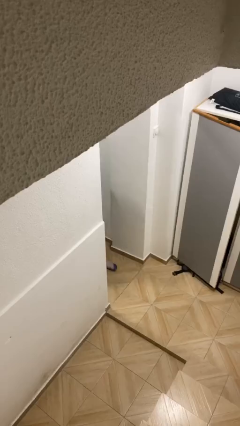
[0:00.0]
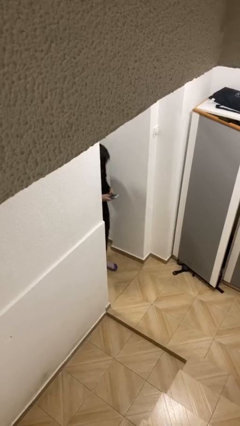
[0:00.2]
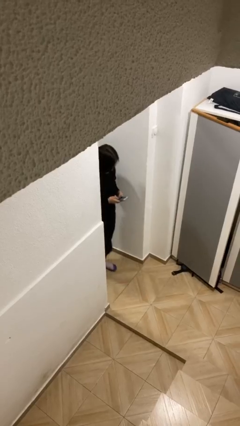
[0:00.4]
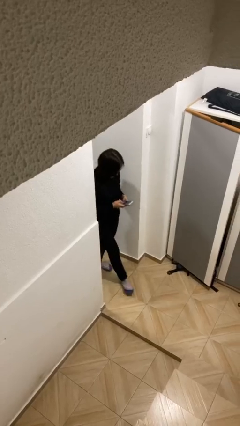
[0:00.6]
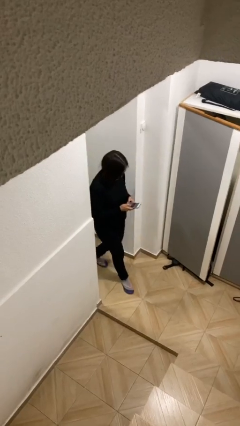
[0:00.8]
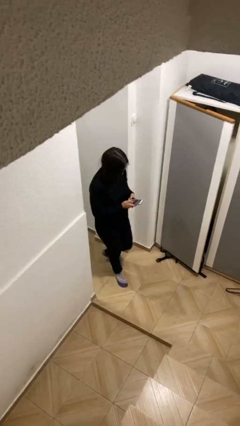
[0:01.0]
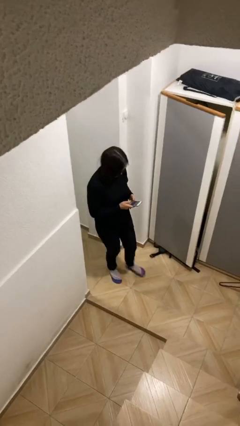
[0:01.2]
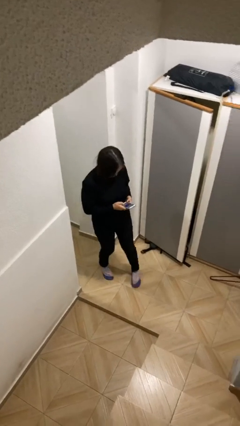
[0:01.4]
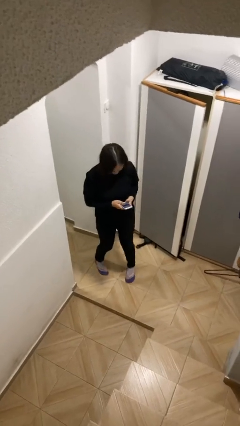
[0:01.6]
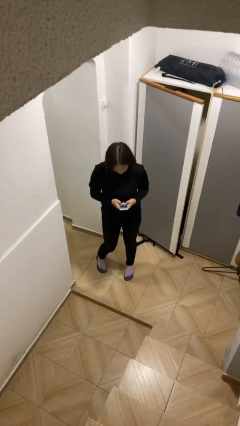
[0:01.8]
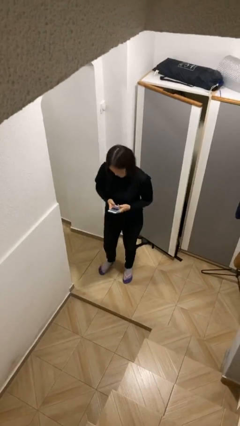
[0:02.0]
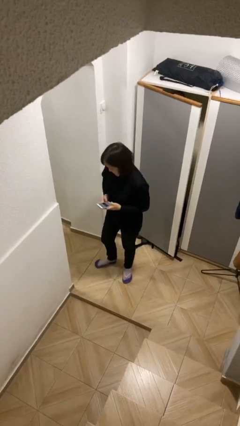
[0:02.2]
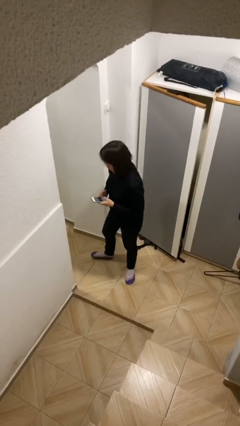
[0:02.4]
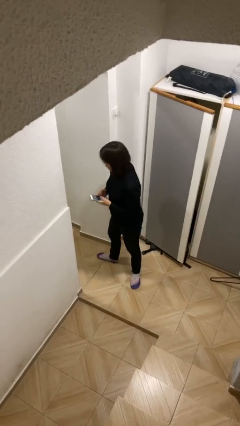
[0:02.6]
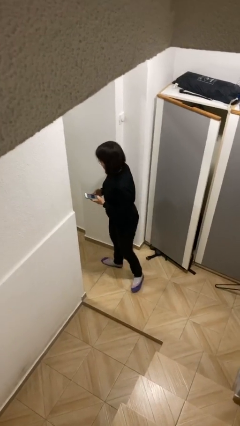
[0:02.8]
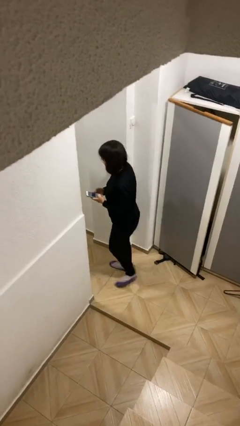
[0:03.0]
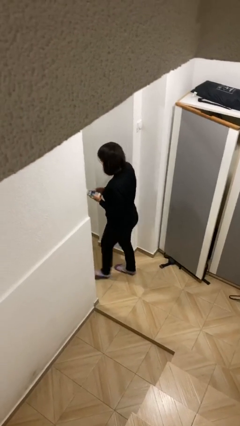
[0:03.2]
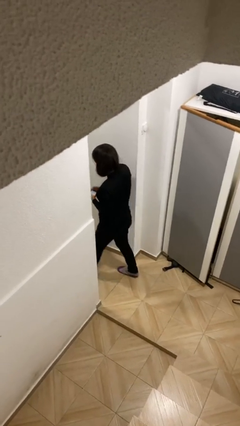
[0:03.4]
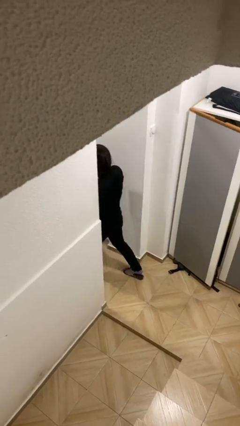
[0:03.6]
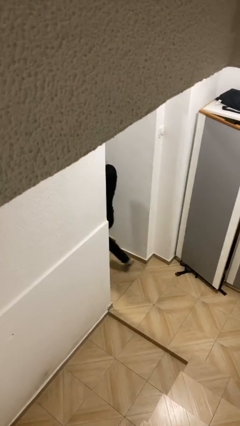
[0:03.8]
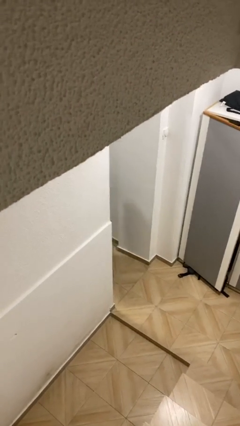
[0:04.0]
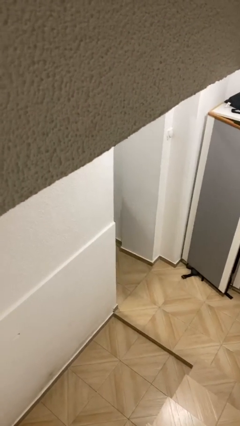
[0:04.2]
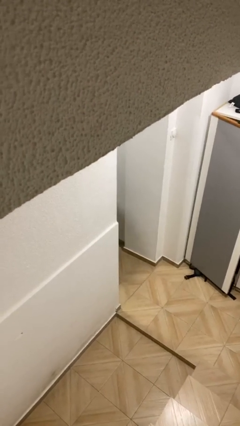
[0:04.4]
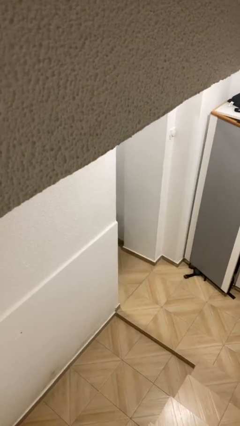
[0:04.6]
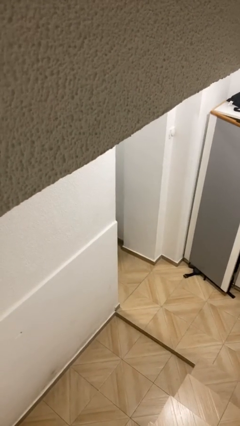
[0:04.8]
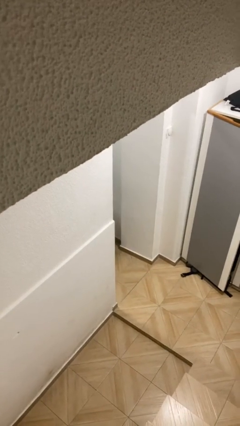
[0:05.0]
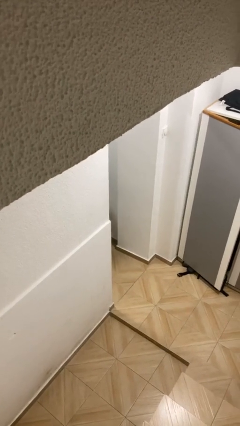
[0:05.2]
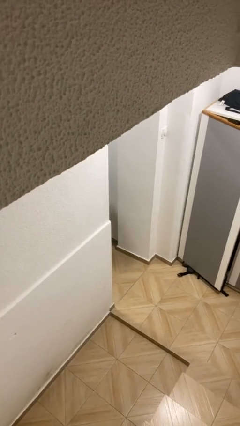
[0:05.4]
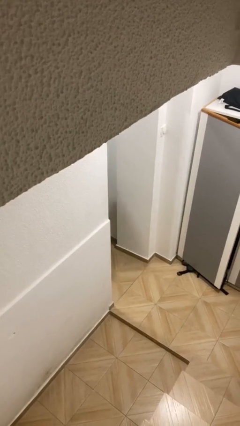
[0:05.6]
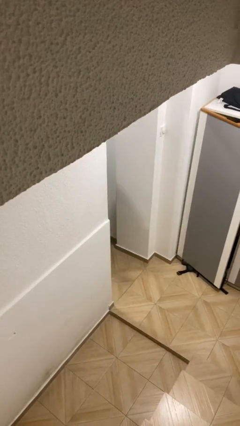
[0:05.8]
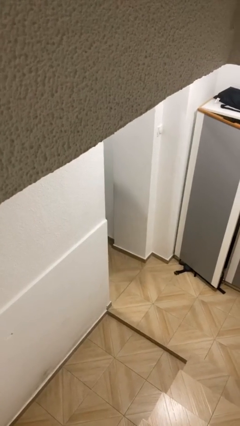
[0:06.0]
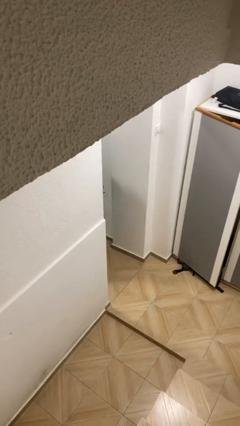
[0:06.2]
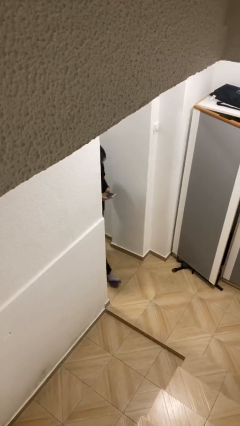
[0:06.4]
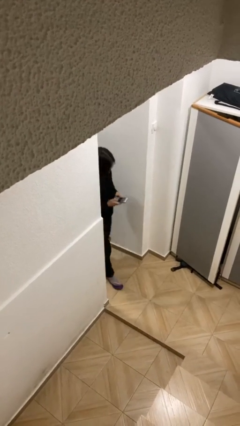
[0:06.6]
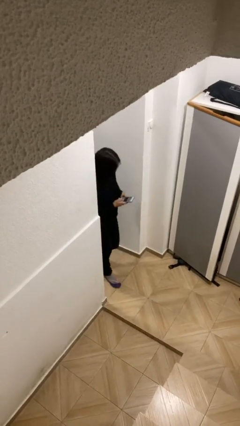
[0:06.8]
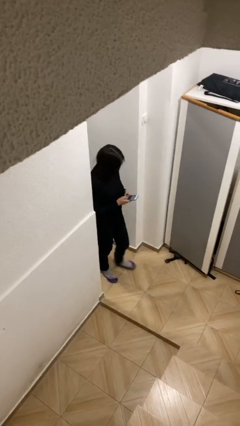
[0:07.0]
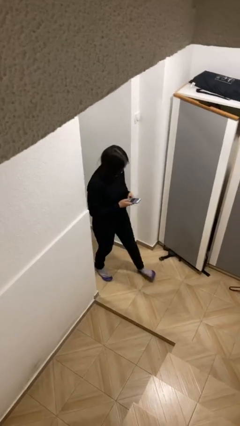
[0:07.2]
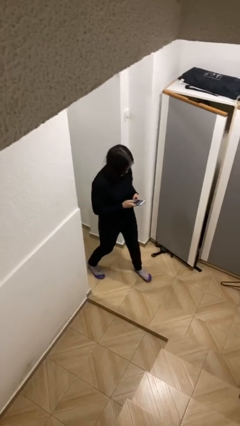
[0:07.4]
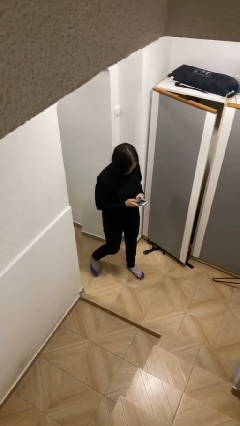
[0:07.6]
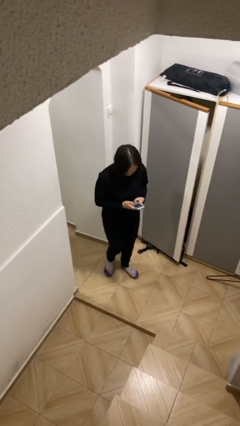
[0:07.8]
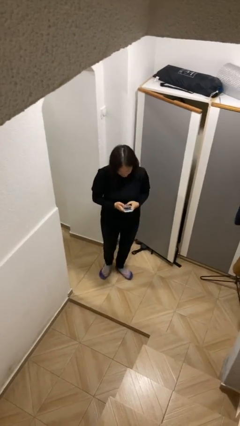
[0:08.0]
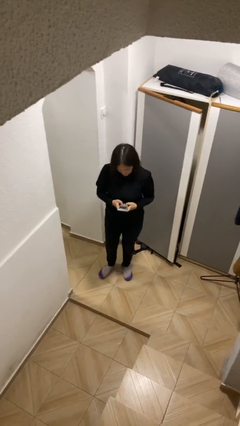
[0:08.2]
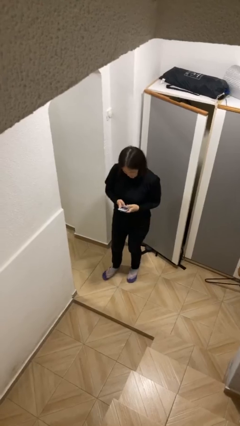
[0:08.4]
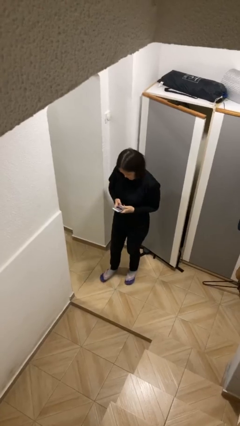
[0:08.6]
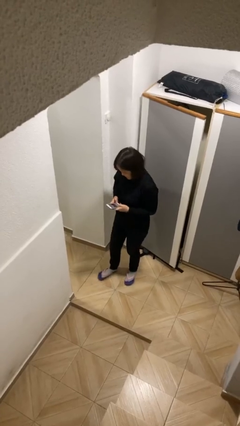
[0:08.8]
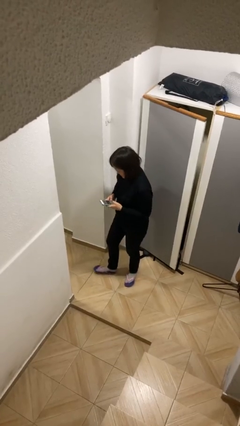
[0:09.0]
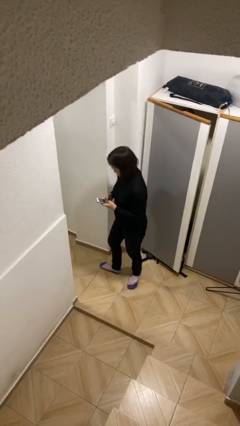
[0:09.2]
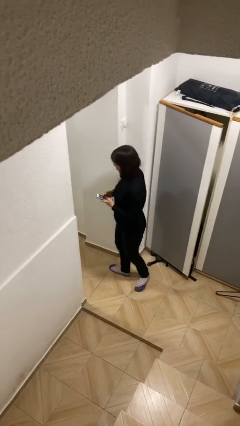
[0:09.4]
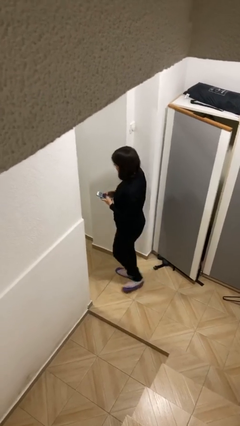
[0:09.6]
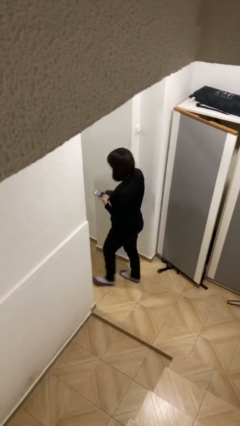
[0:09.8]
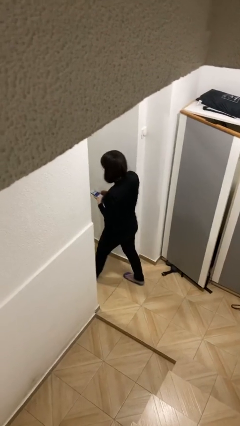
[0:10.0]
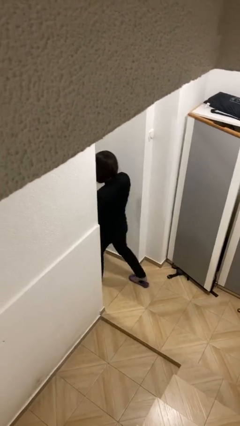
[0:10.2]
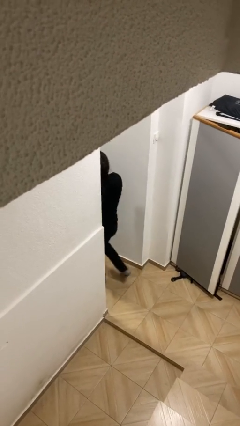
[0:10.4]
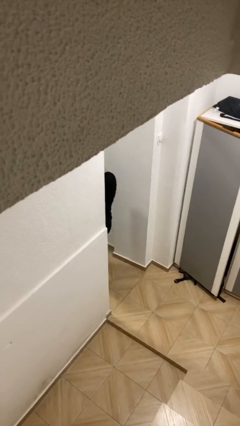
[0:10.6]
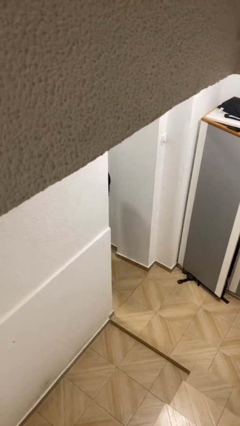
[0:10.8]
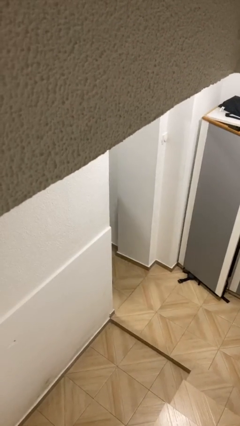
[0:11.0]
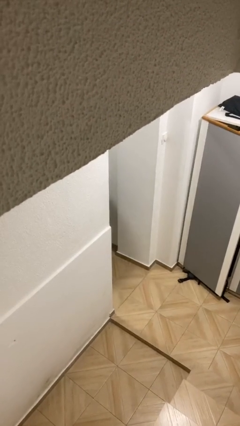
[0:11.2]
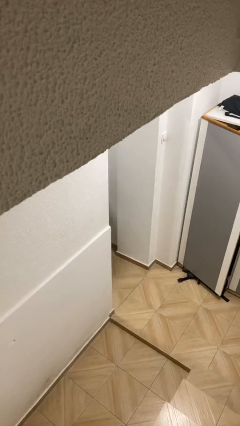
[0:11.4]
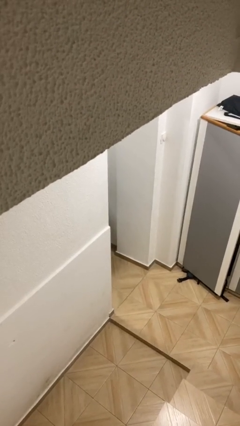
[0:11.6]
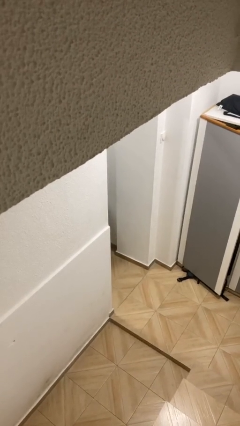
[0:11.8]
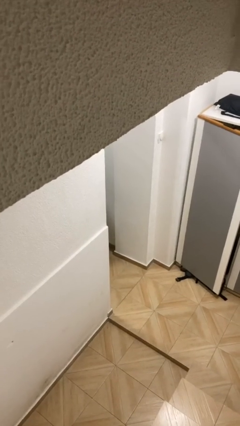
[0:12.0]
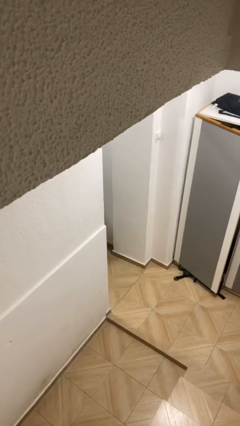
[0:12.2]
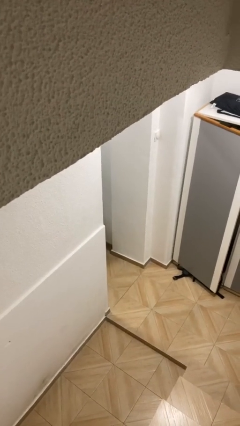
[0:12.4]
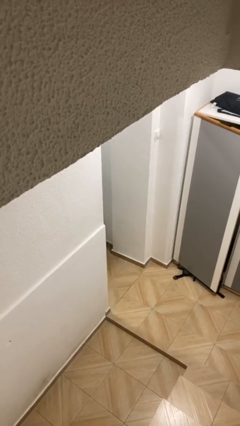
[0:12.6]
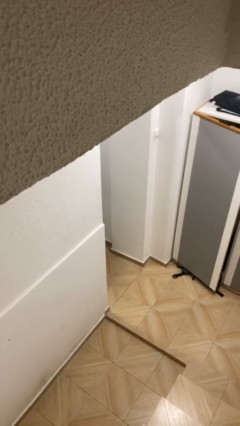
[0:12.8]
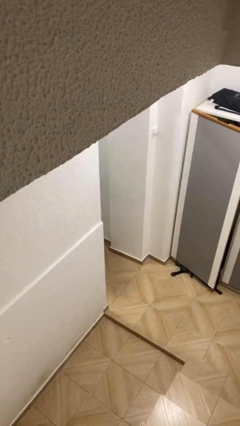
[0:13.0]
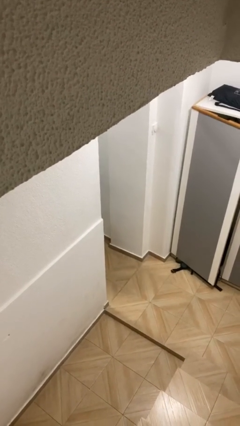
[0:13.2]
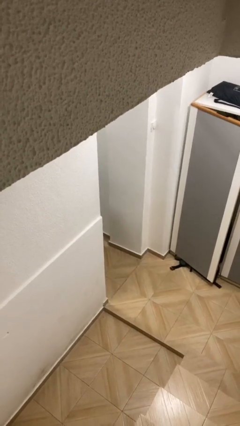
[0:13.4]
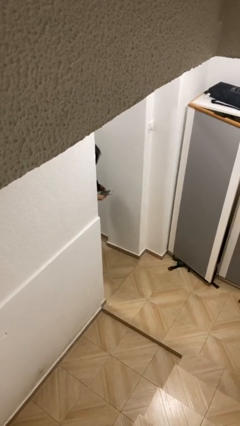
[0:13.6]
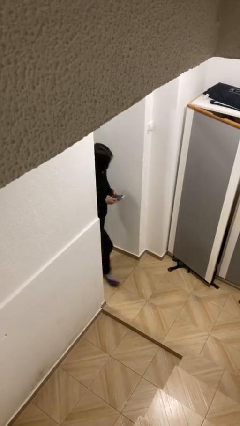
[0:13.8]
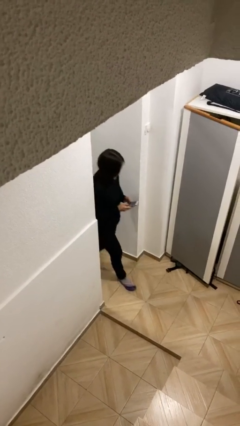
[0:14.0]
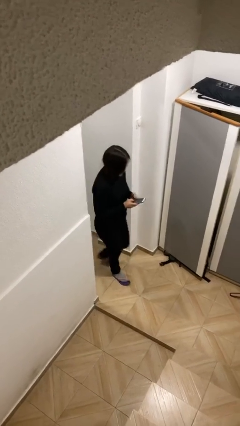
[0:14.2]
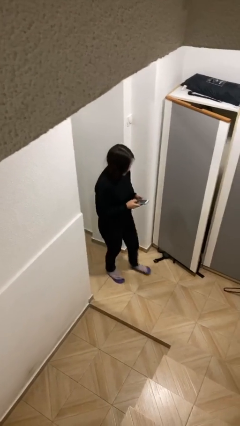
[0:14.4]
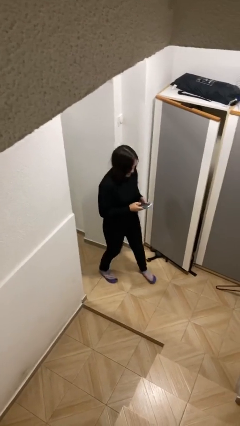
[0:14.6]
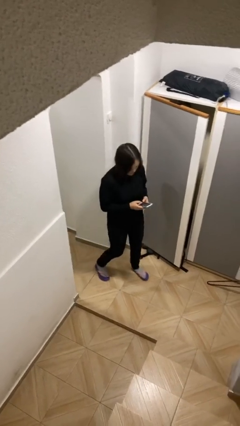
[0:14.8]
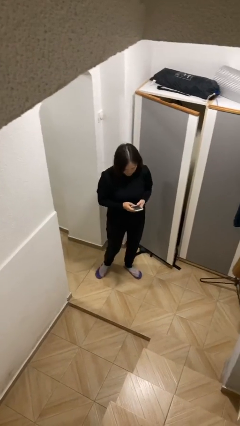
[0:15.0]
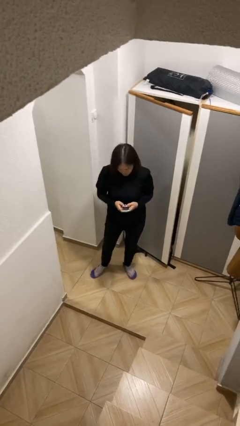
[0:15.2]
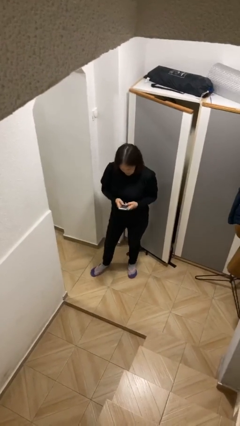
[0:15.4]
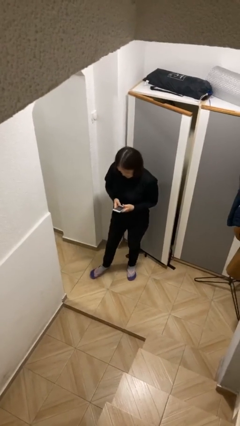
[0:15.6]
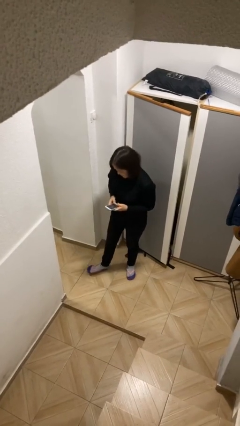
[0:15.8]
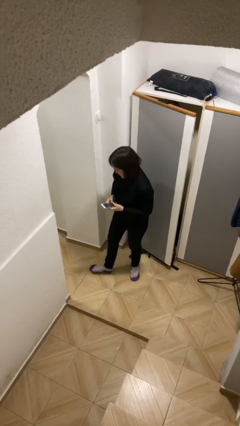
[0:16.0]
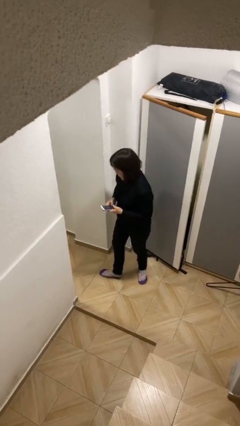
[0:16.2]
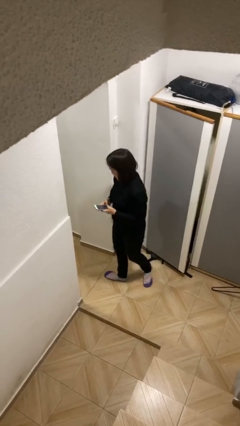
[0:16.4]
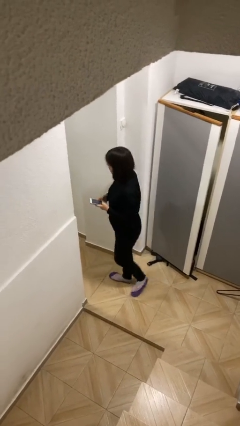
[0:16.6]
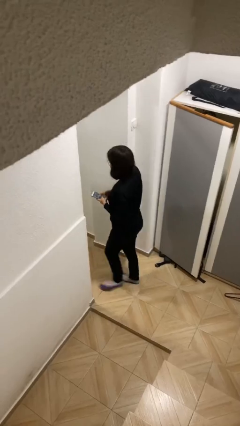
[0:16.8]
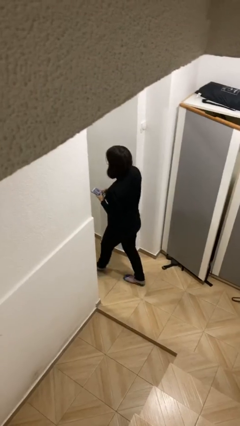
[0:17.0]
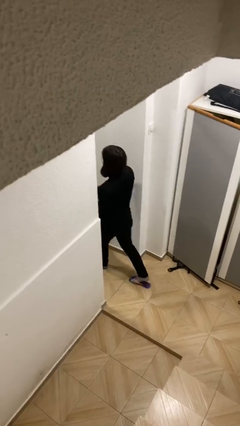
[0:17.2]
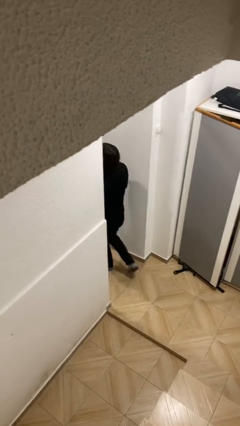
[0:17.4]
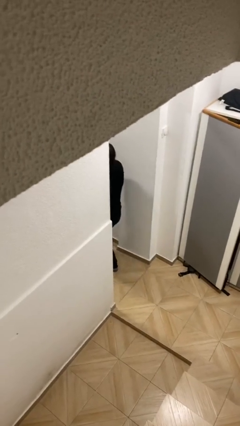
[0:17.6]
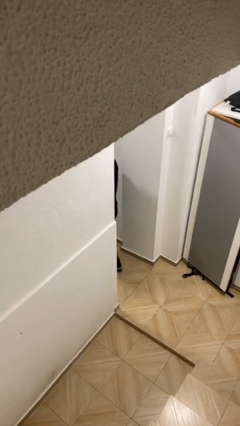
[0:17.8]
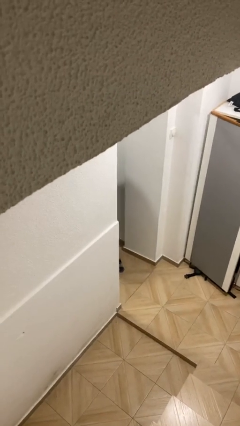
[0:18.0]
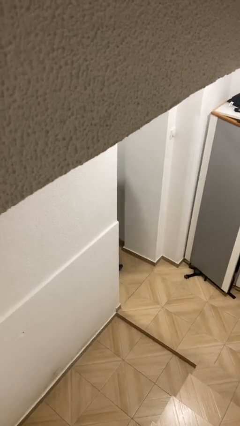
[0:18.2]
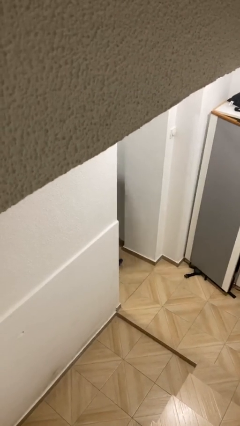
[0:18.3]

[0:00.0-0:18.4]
person texts on phone
